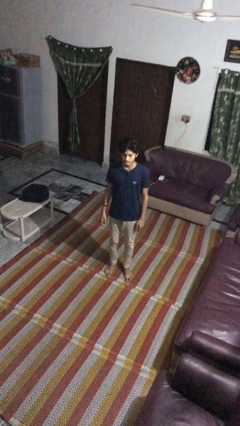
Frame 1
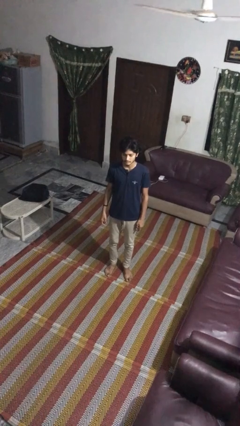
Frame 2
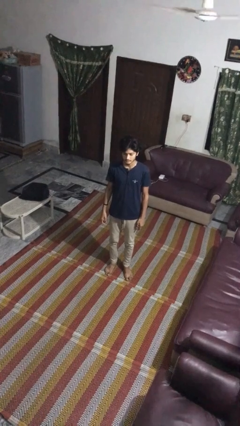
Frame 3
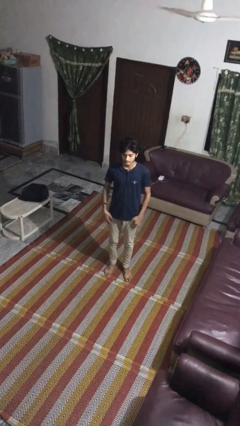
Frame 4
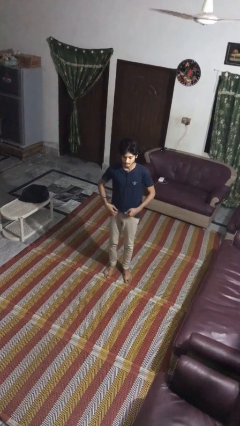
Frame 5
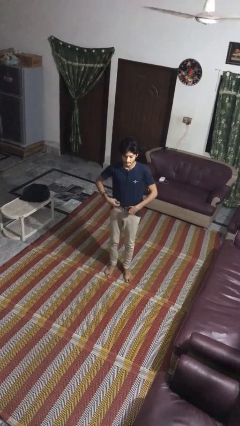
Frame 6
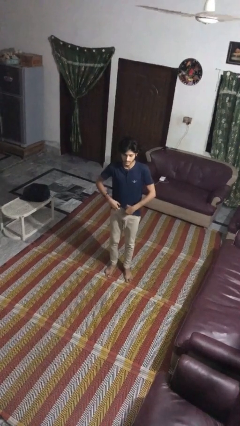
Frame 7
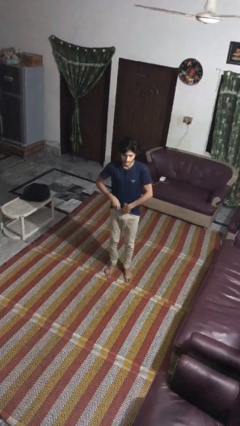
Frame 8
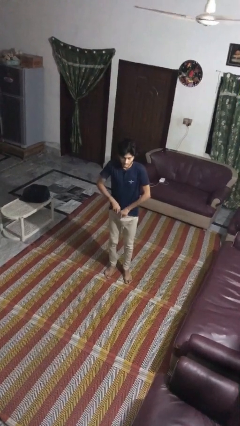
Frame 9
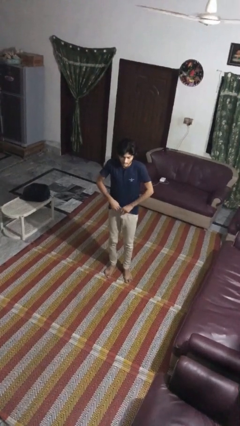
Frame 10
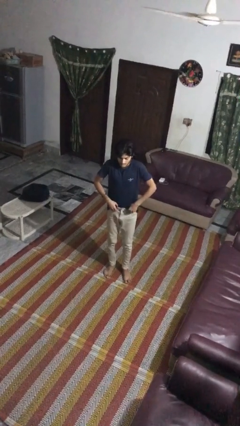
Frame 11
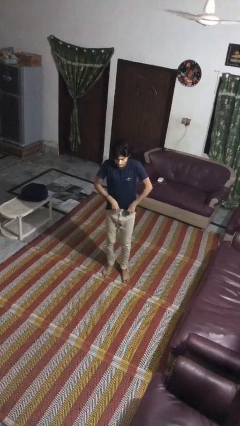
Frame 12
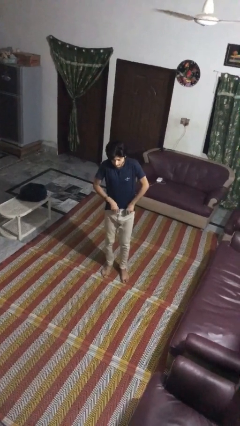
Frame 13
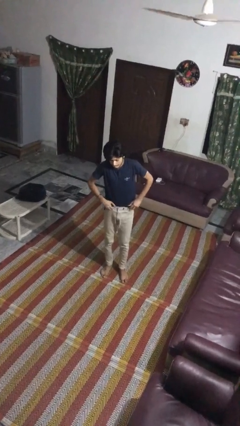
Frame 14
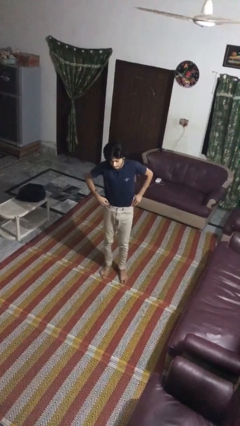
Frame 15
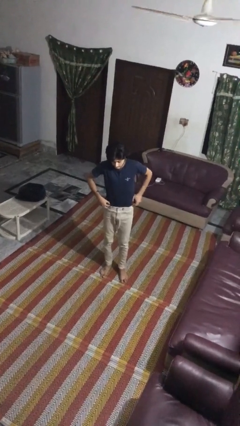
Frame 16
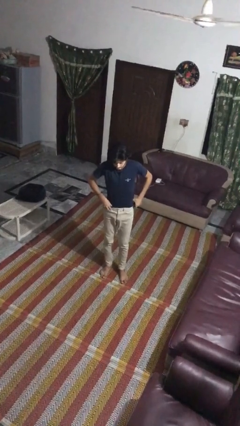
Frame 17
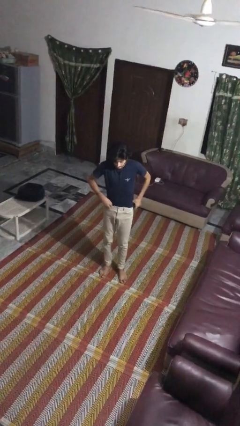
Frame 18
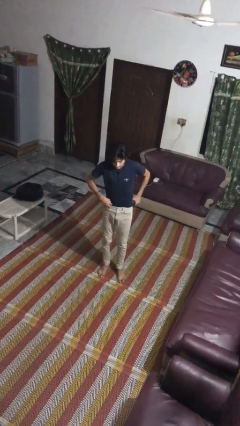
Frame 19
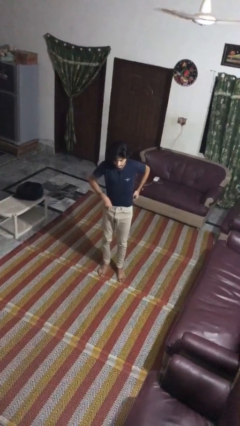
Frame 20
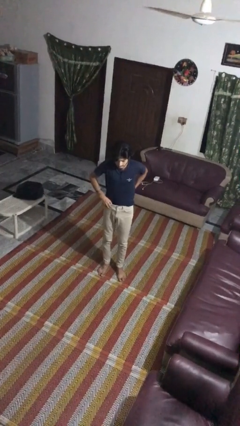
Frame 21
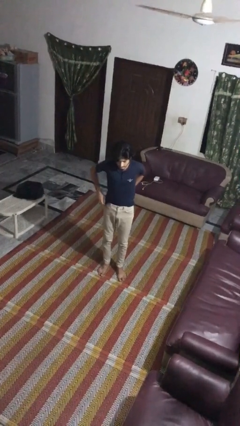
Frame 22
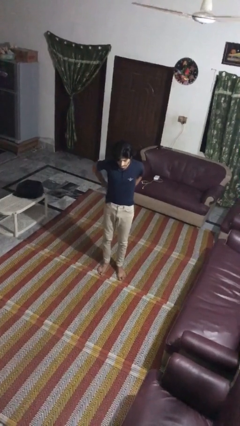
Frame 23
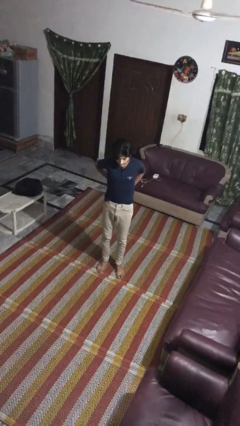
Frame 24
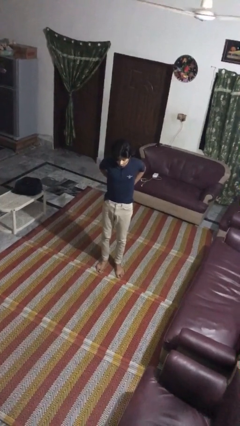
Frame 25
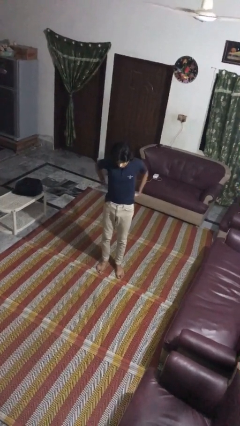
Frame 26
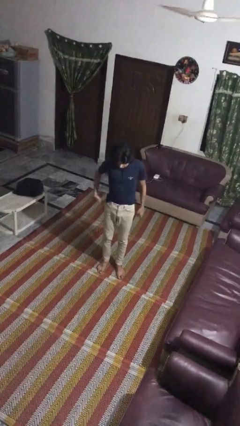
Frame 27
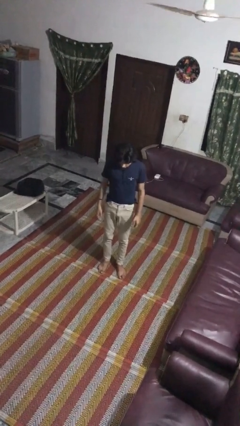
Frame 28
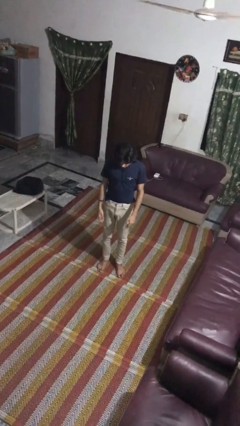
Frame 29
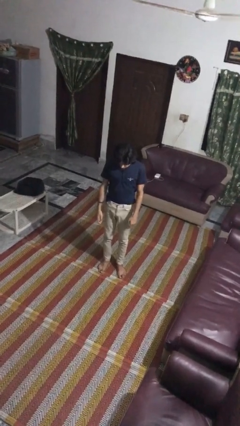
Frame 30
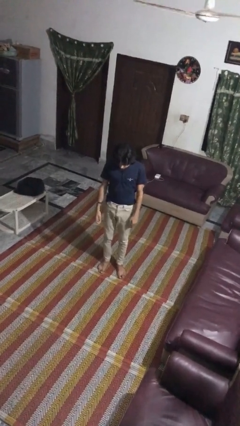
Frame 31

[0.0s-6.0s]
person tucks in shirt

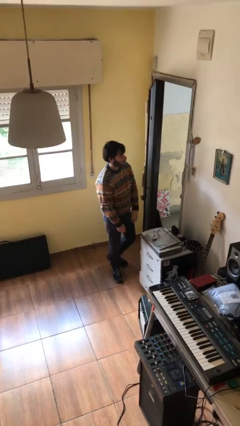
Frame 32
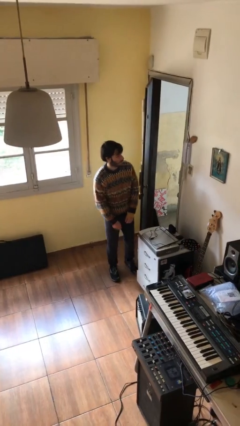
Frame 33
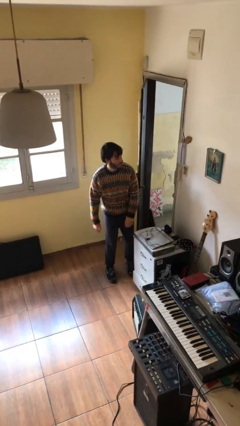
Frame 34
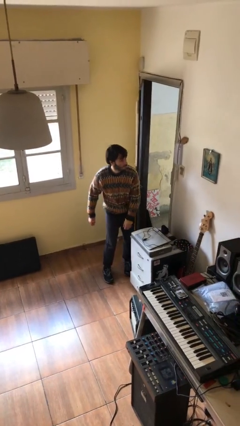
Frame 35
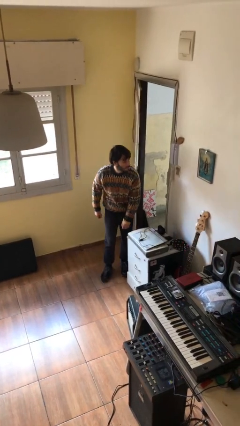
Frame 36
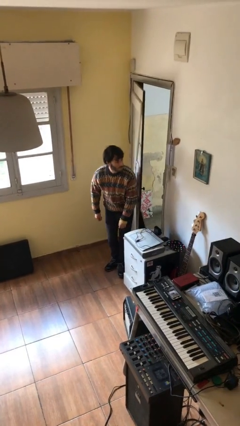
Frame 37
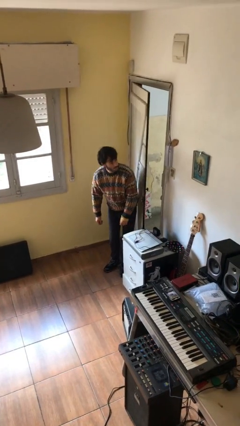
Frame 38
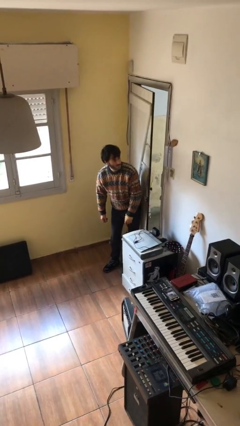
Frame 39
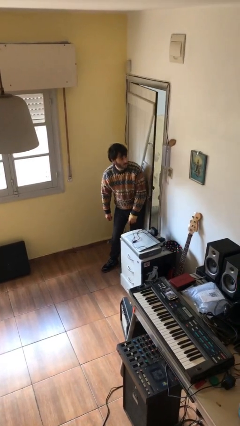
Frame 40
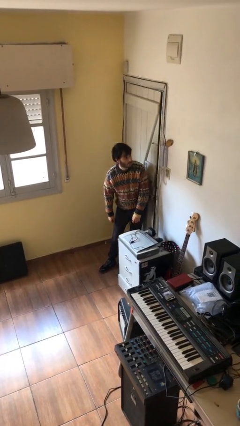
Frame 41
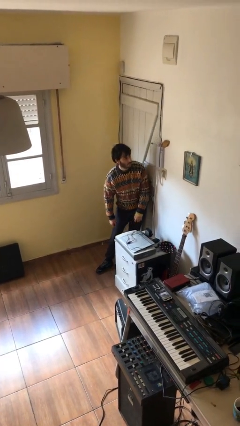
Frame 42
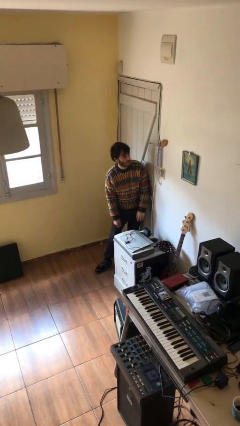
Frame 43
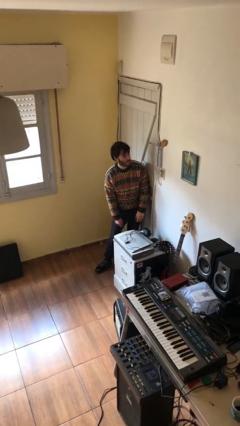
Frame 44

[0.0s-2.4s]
person closes door with hip

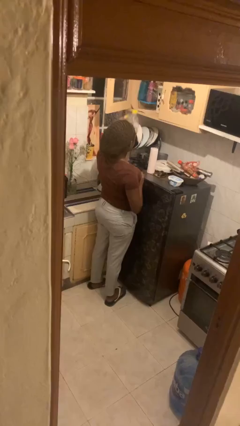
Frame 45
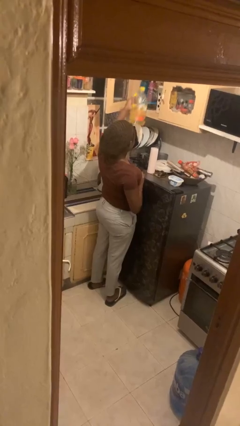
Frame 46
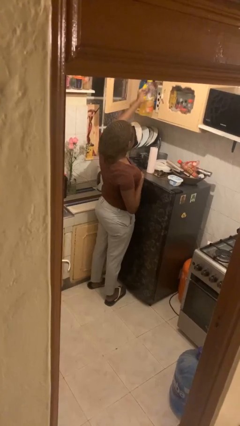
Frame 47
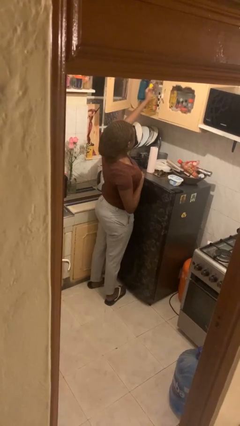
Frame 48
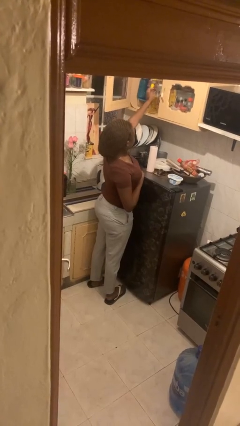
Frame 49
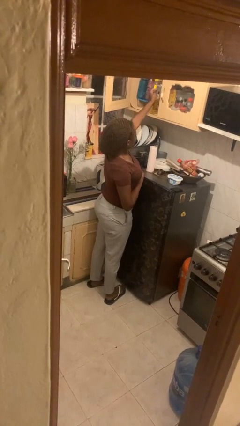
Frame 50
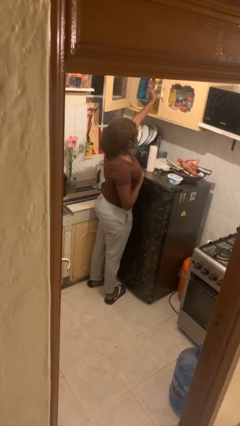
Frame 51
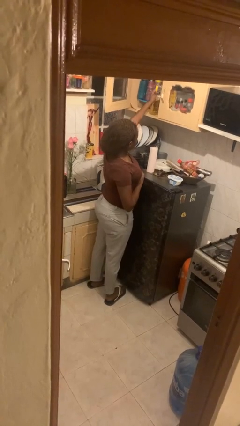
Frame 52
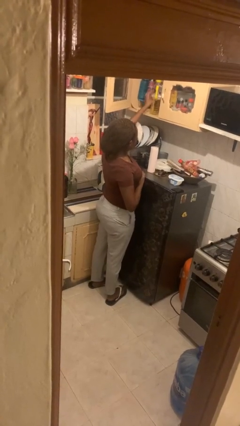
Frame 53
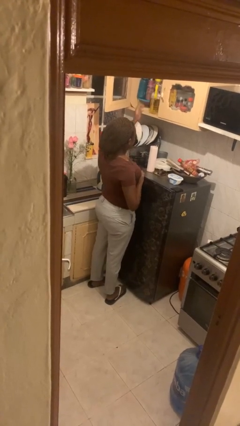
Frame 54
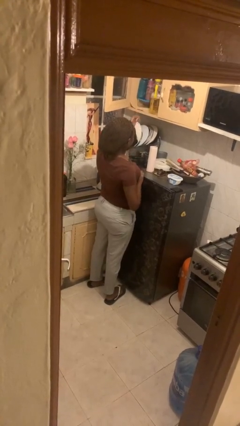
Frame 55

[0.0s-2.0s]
person puts down object into cabinet

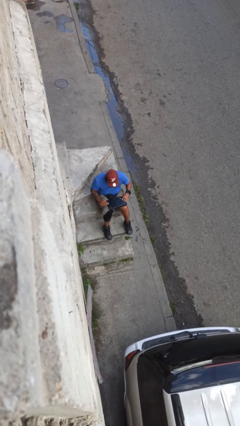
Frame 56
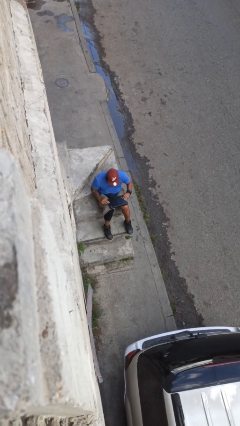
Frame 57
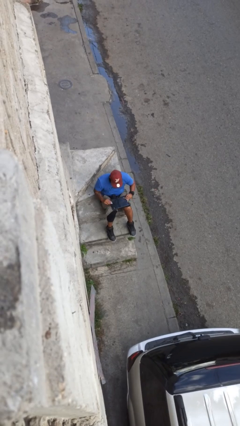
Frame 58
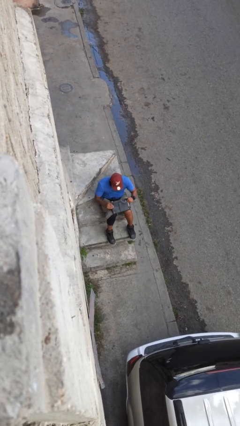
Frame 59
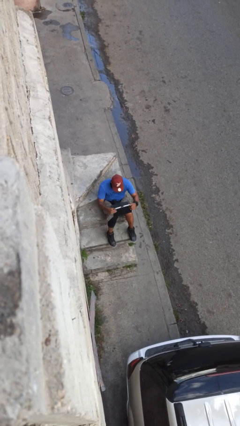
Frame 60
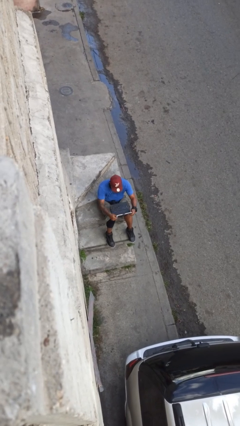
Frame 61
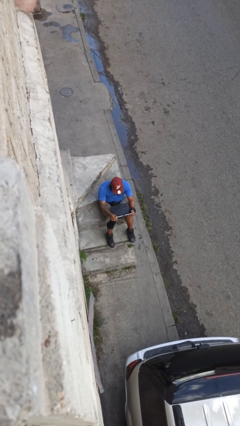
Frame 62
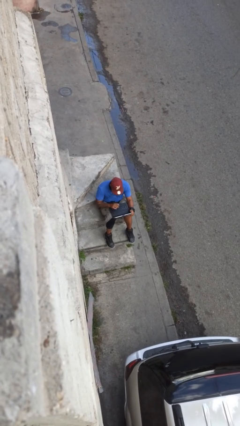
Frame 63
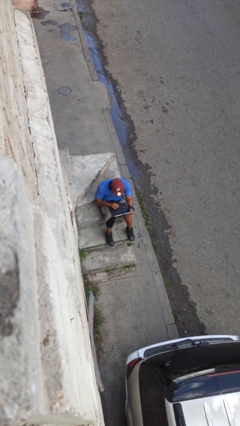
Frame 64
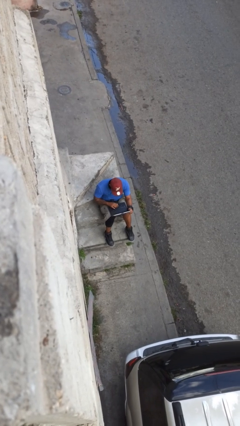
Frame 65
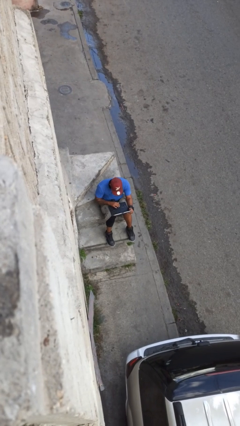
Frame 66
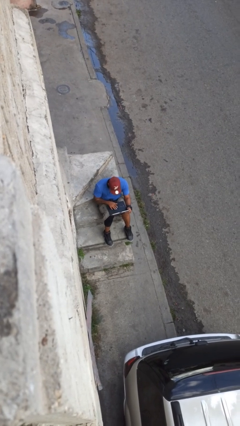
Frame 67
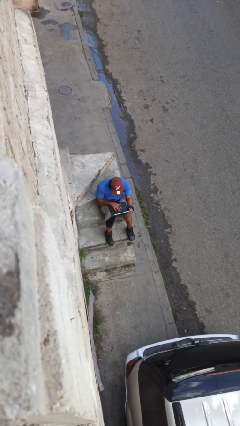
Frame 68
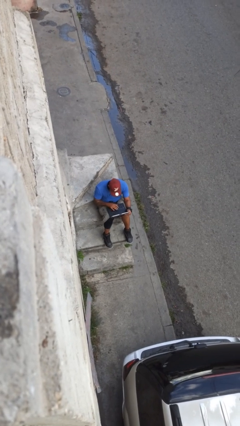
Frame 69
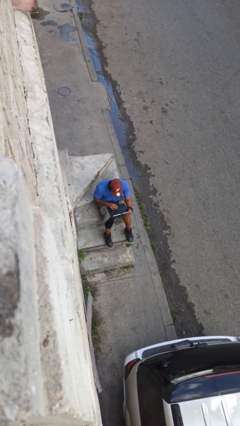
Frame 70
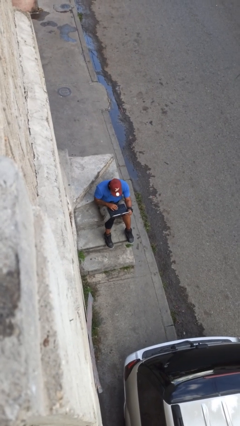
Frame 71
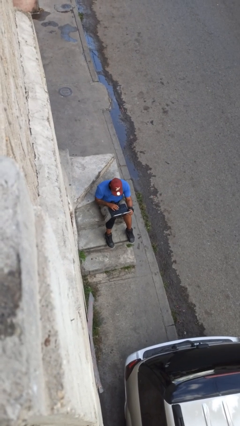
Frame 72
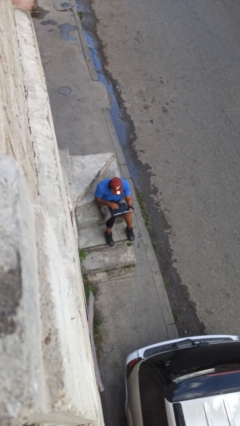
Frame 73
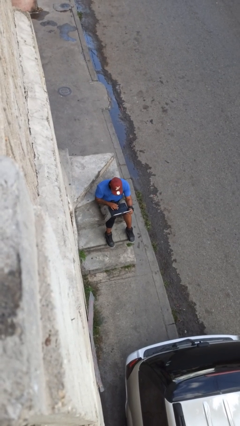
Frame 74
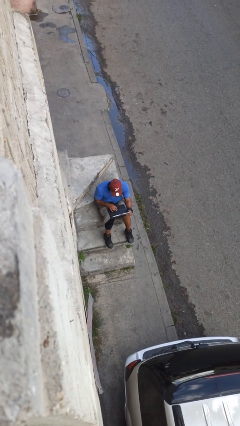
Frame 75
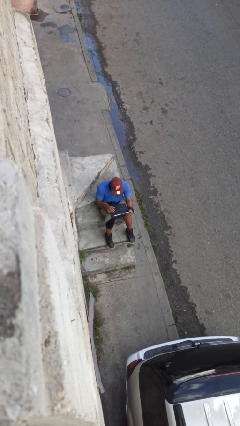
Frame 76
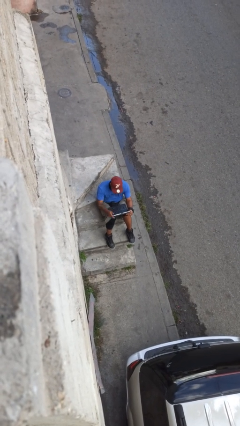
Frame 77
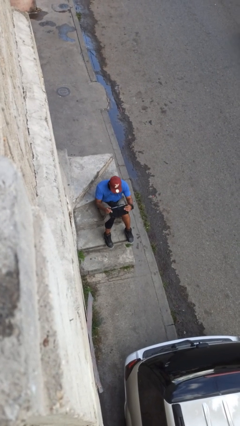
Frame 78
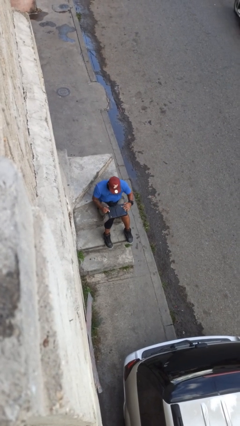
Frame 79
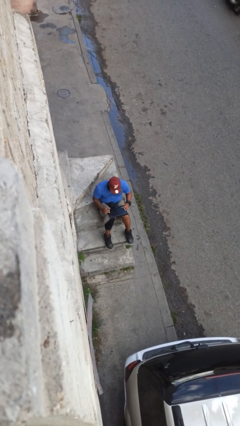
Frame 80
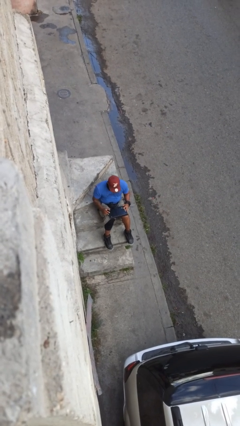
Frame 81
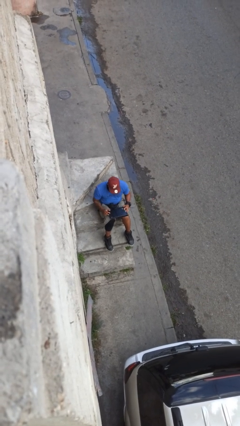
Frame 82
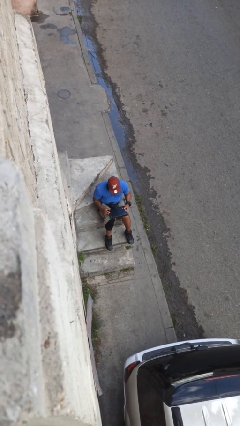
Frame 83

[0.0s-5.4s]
person interacts with laptop

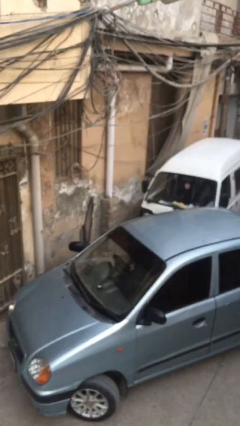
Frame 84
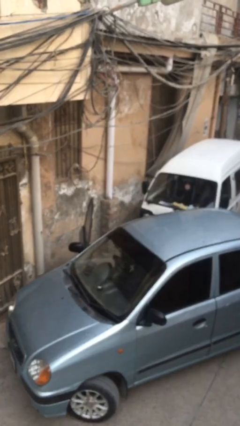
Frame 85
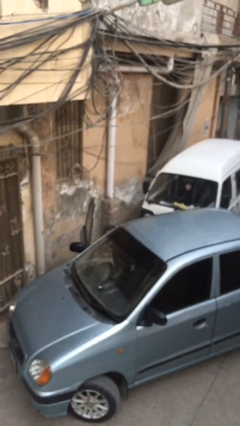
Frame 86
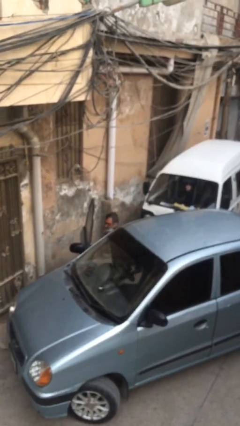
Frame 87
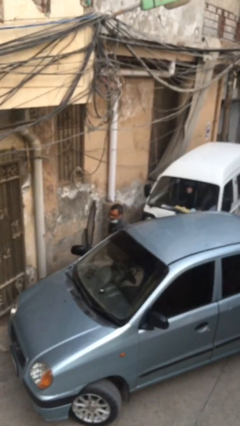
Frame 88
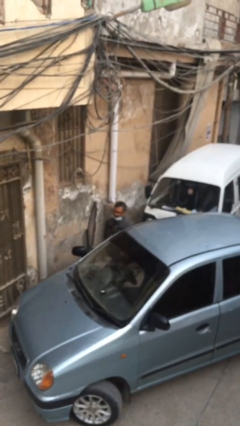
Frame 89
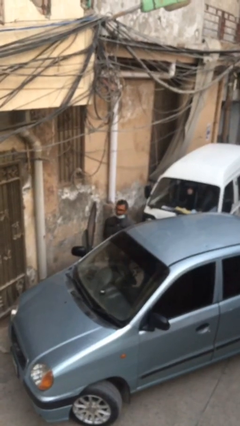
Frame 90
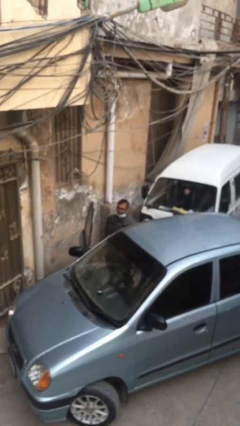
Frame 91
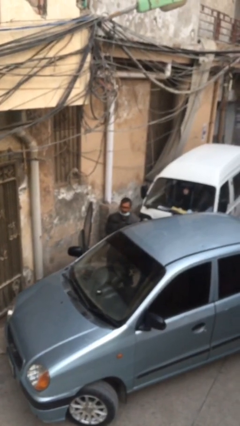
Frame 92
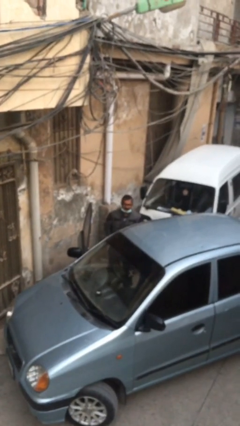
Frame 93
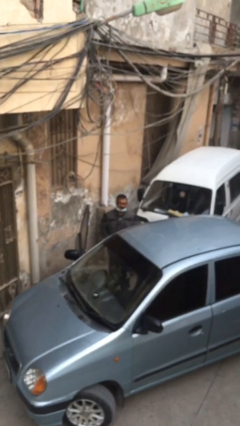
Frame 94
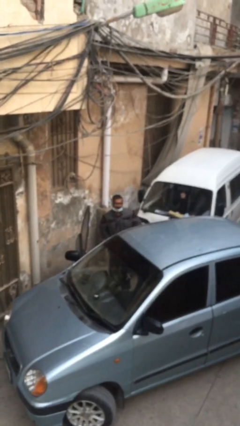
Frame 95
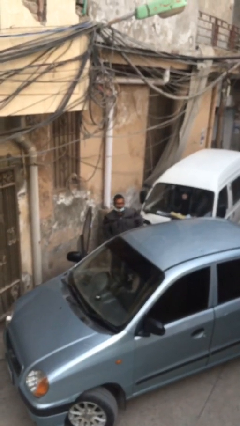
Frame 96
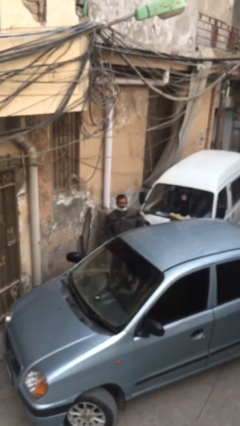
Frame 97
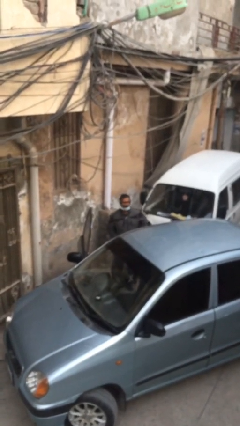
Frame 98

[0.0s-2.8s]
person exits car
